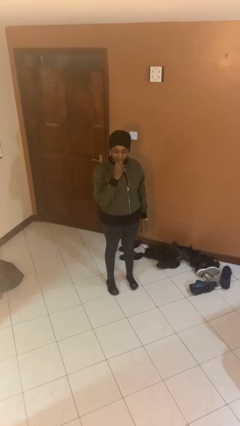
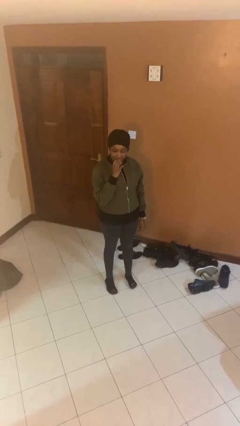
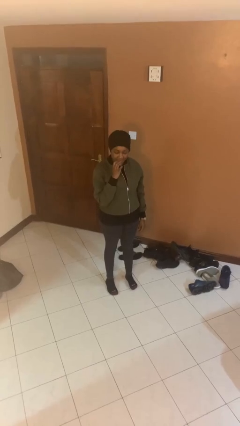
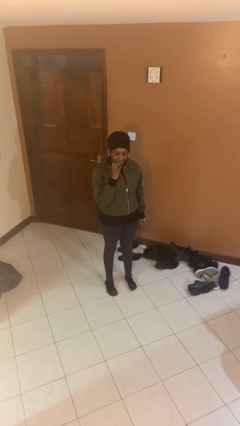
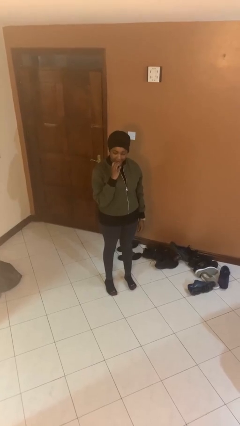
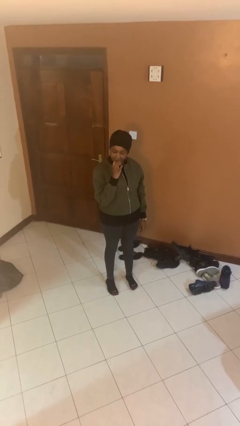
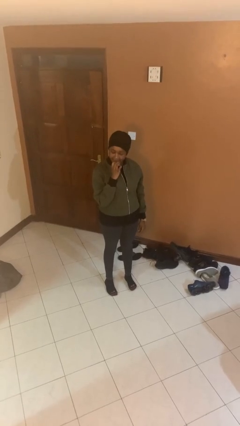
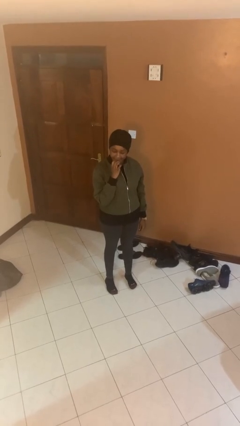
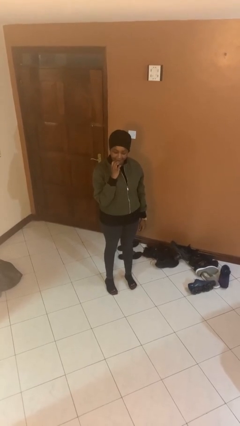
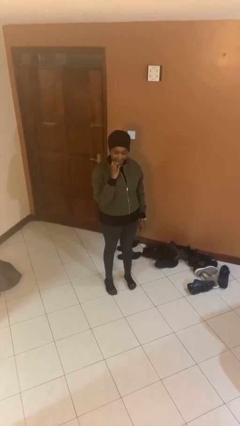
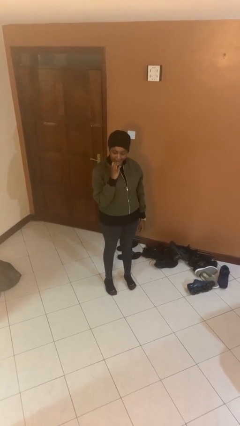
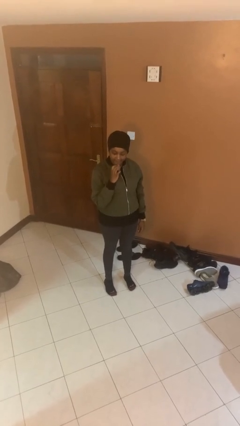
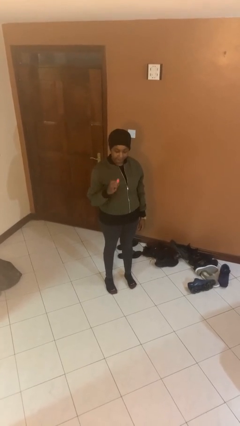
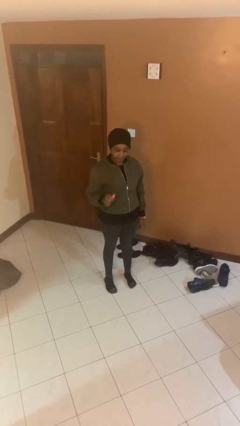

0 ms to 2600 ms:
person applies lip makeup

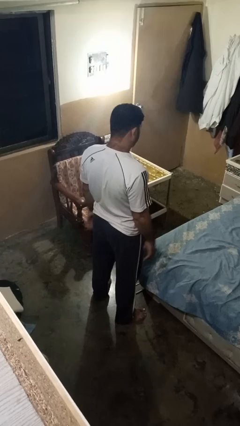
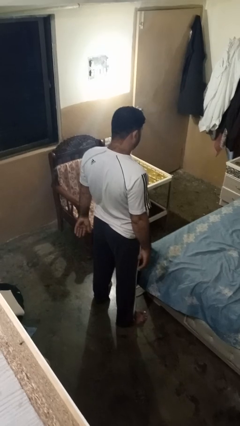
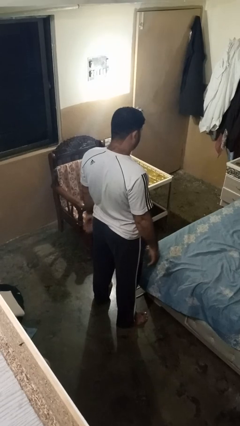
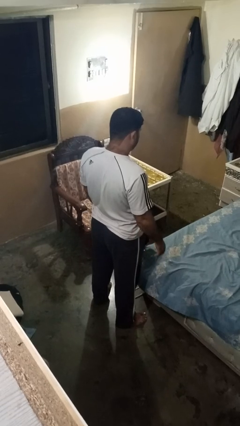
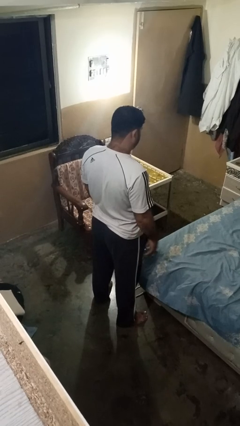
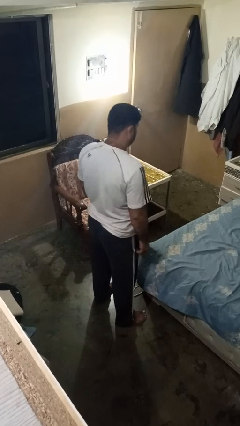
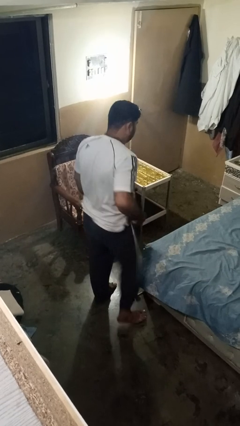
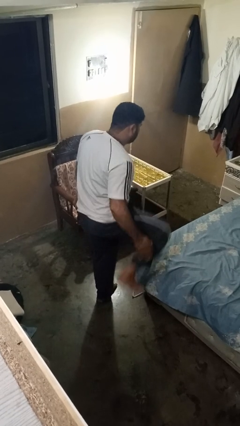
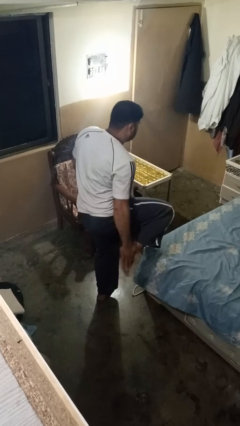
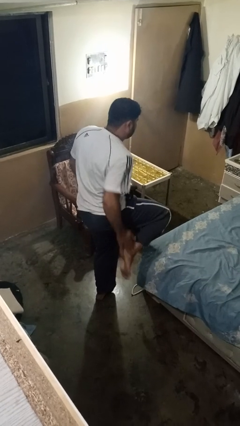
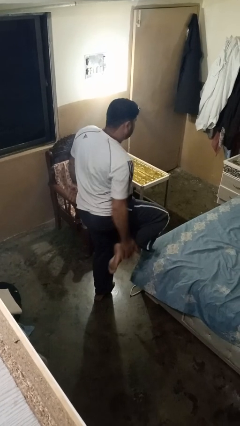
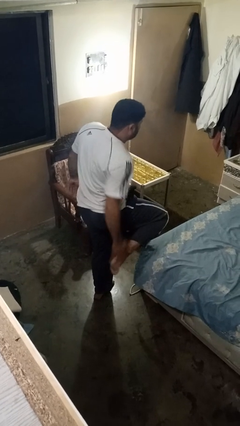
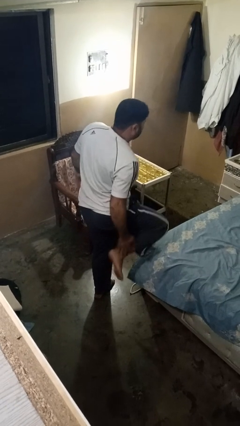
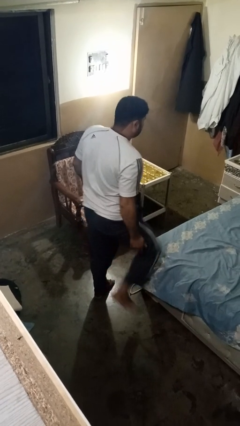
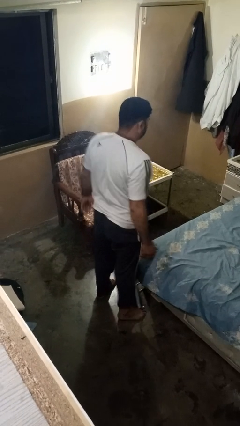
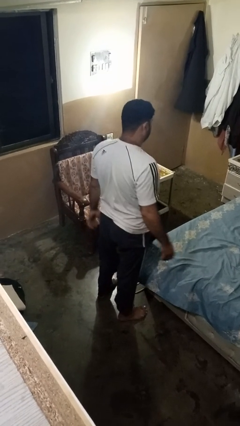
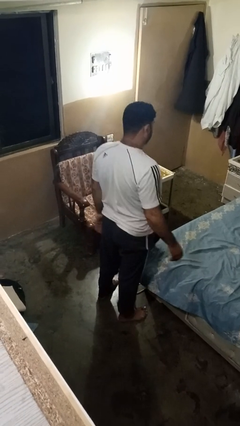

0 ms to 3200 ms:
person swats bug

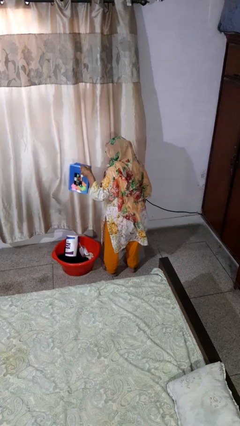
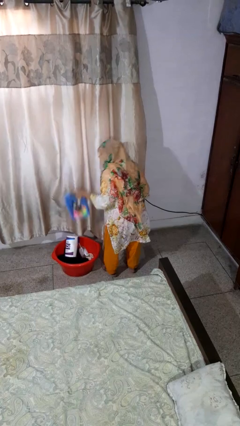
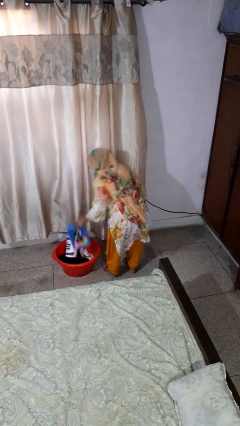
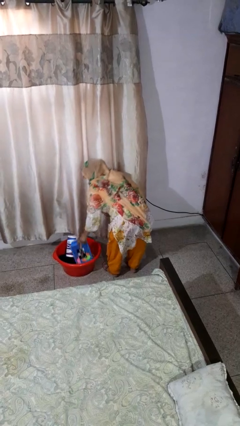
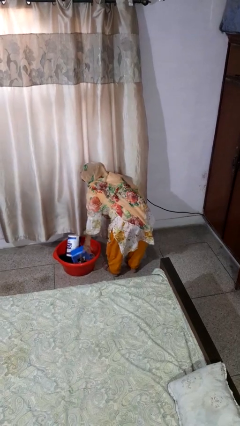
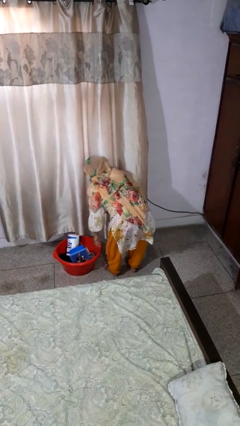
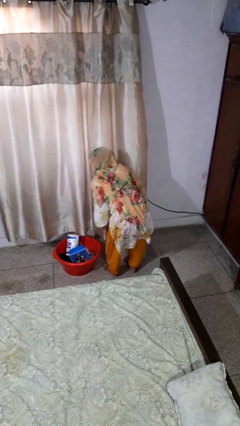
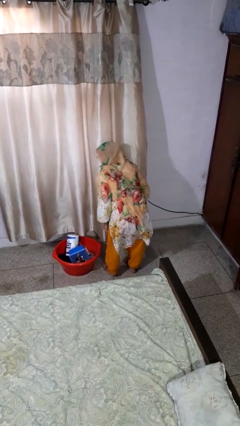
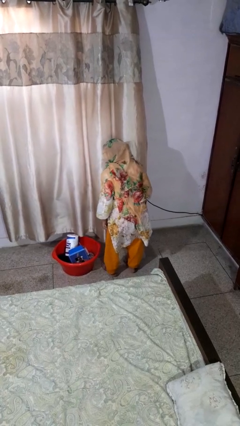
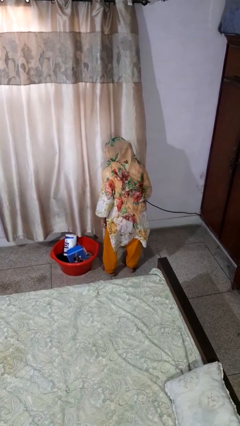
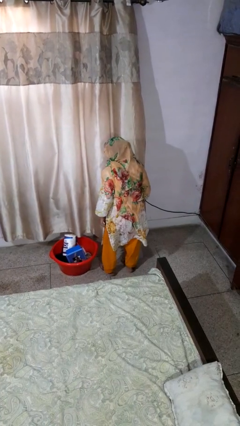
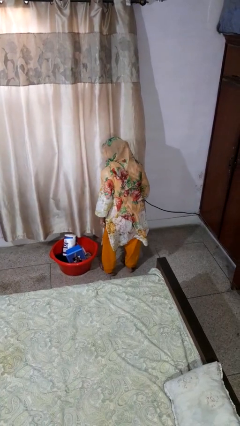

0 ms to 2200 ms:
person puts object into basket

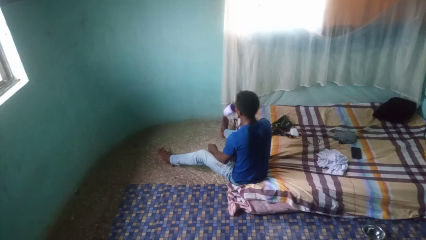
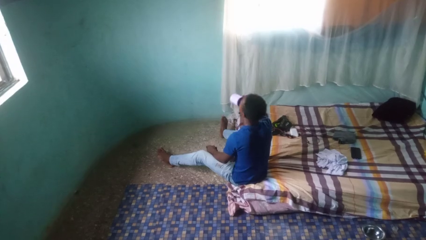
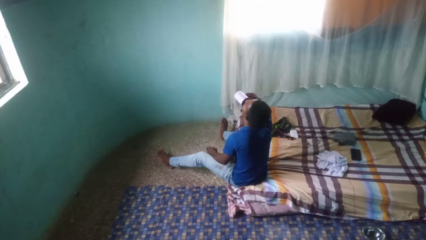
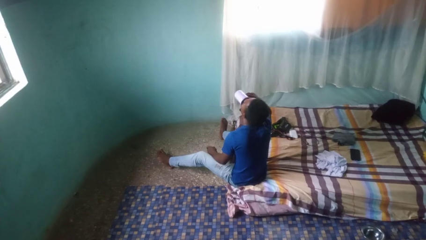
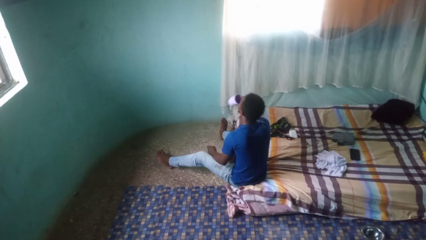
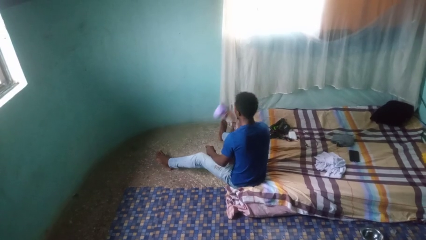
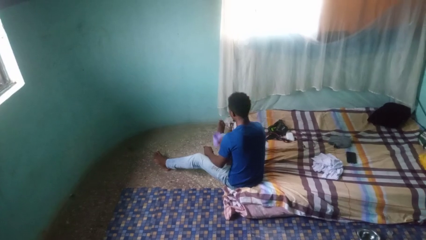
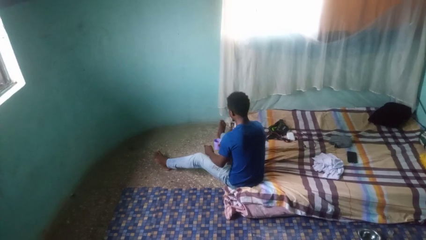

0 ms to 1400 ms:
person drinks from cup

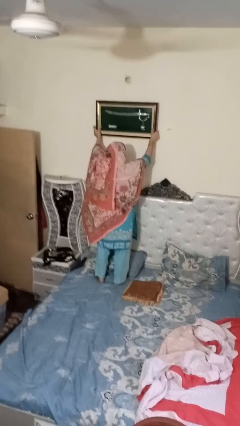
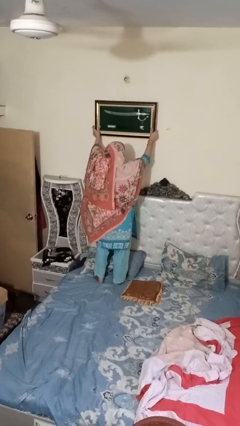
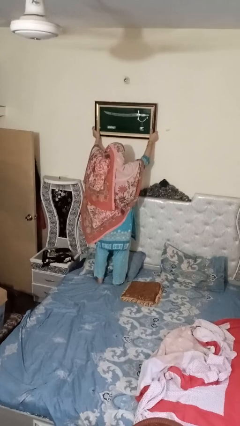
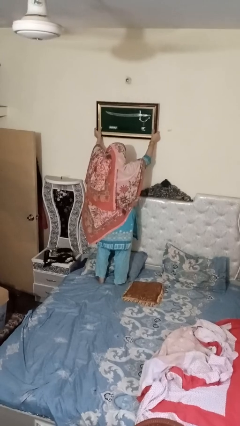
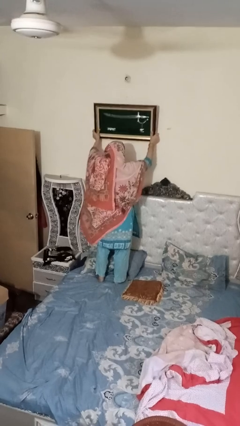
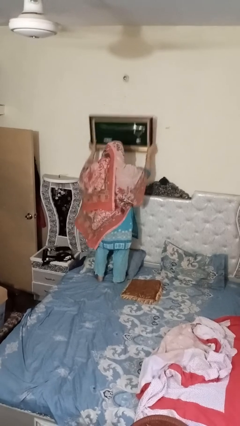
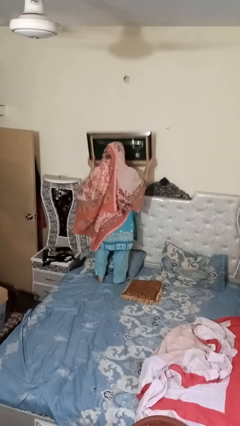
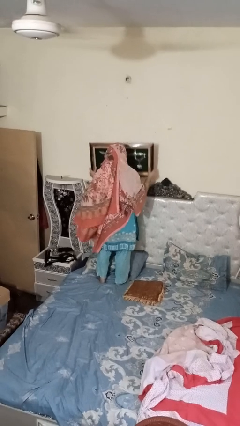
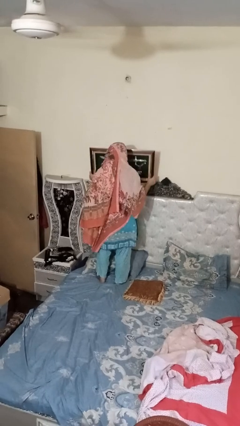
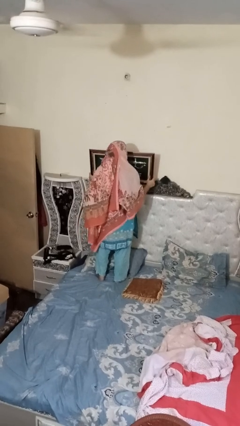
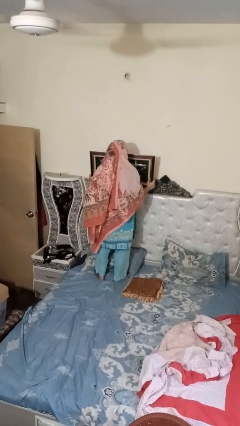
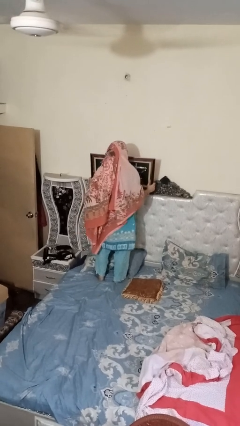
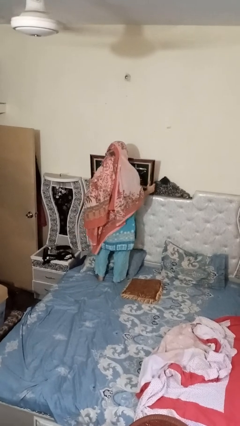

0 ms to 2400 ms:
person puts up picture frame

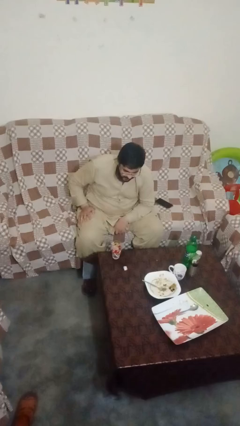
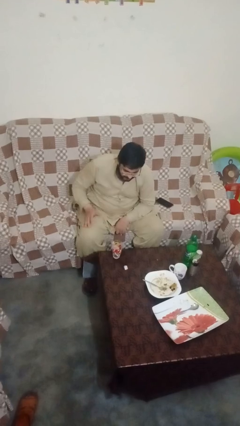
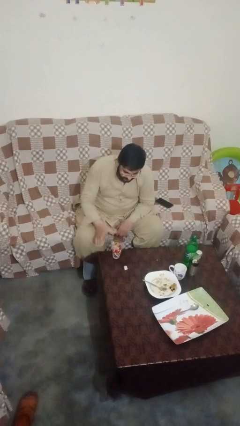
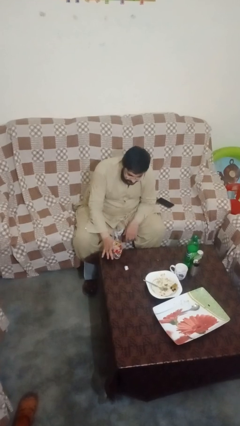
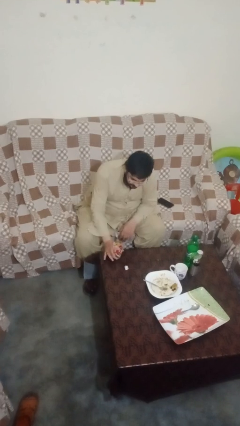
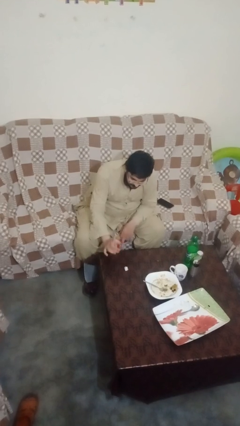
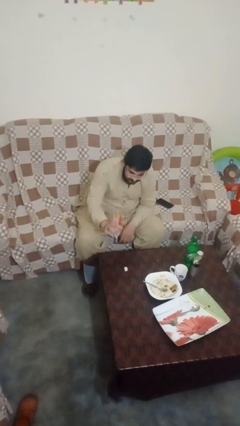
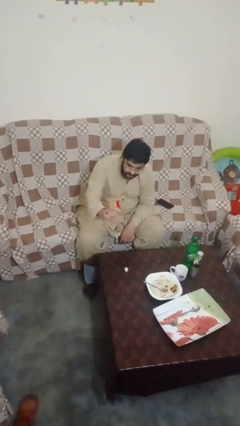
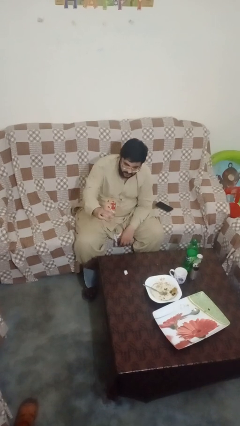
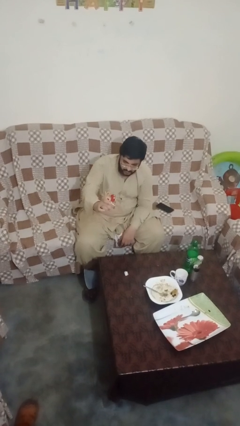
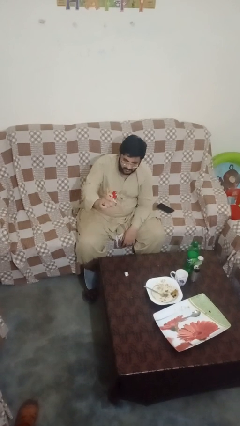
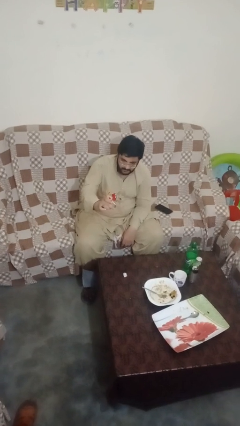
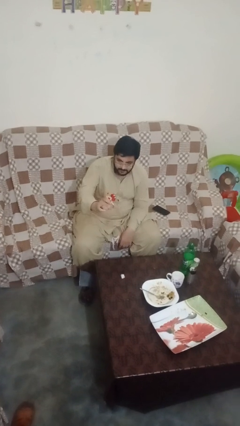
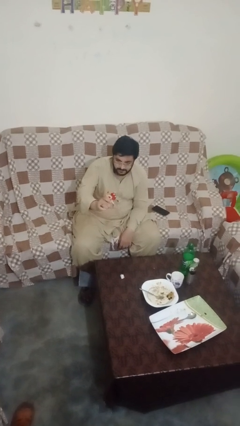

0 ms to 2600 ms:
person picks up object from table

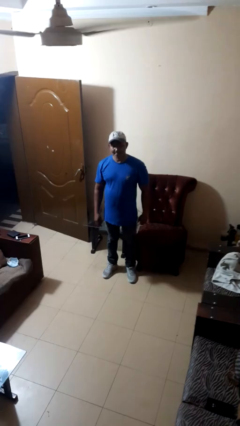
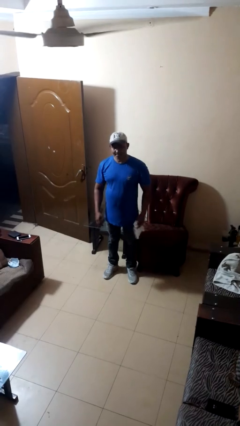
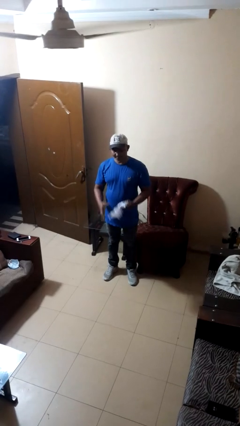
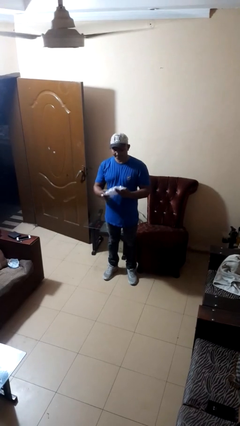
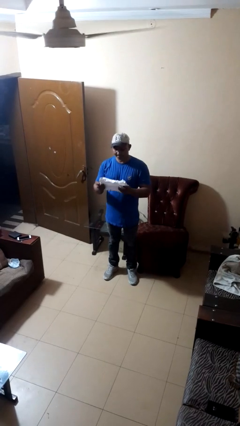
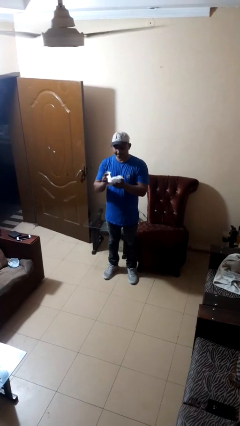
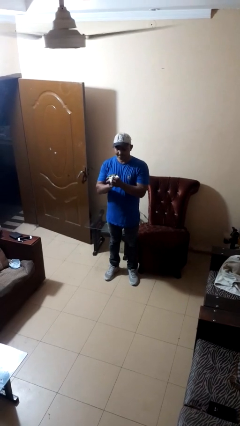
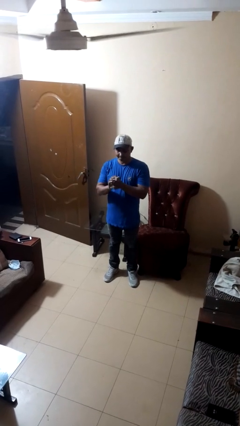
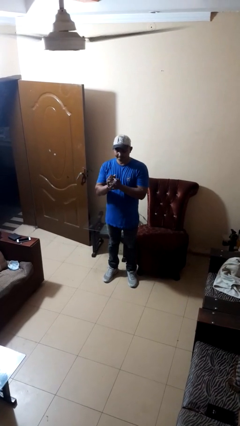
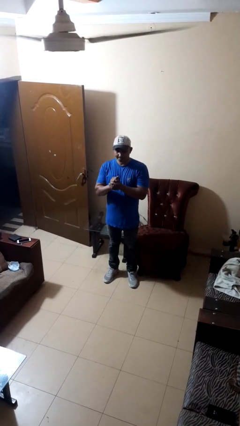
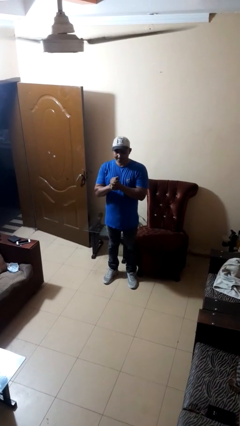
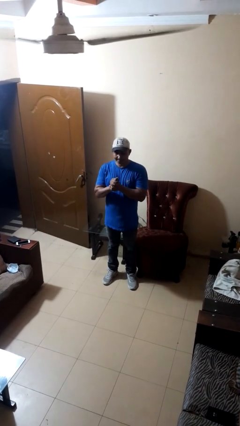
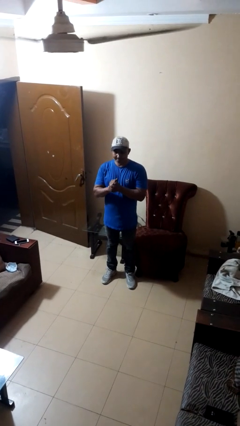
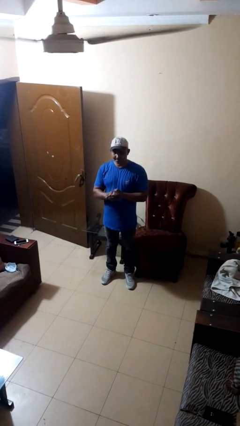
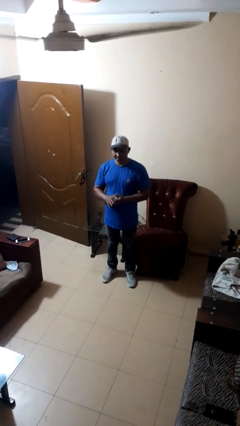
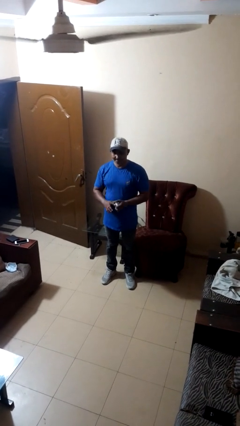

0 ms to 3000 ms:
person crumples paper
